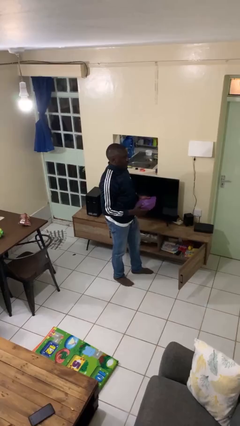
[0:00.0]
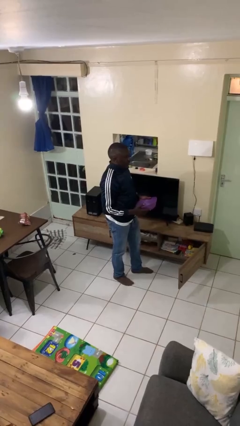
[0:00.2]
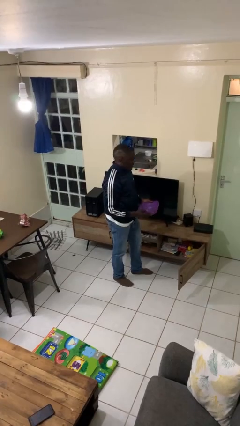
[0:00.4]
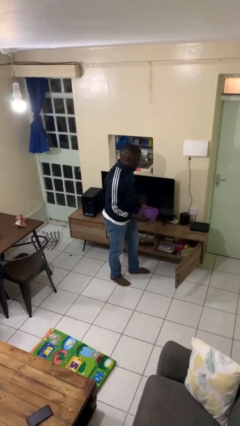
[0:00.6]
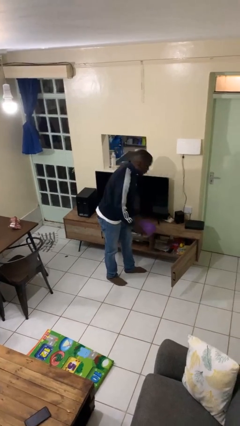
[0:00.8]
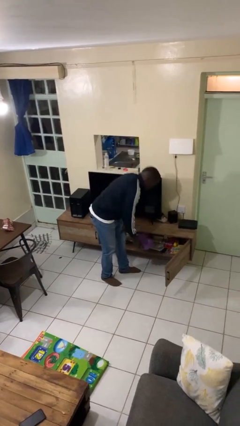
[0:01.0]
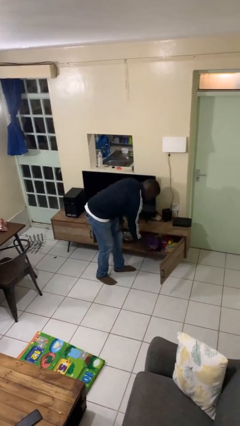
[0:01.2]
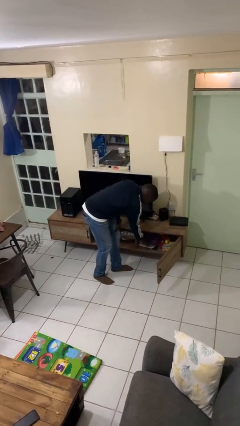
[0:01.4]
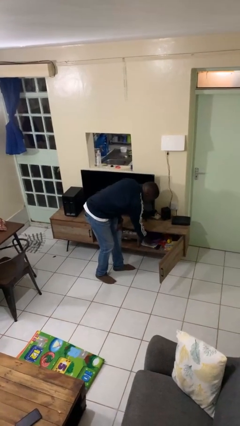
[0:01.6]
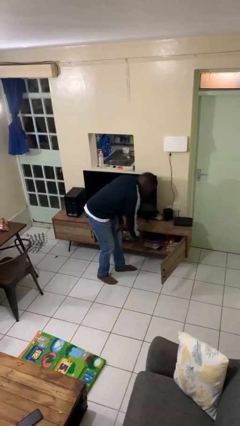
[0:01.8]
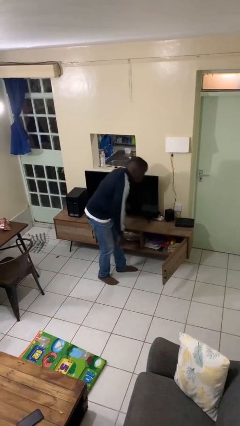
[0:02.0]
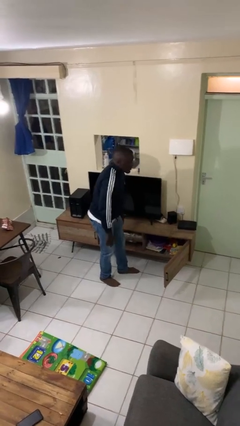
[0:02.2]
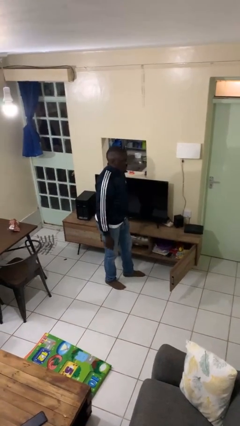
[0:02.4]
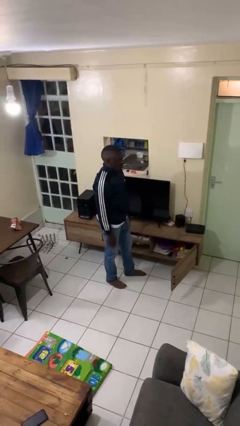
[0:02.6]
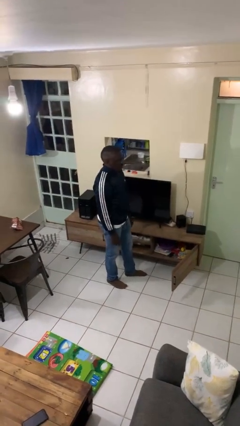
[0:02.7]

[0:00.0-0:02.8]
person puts down object into cabinet

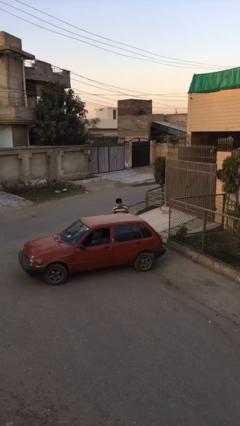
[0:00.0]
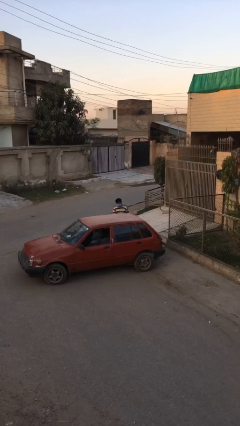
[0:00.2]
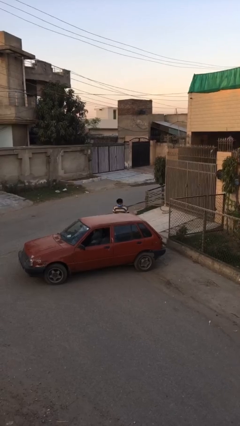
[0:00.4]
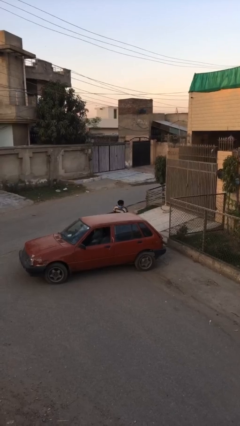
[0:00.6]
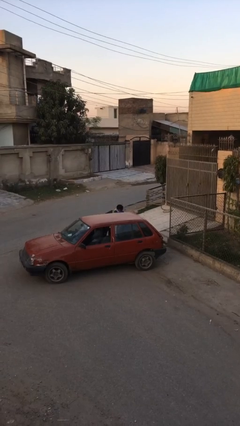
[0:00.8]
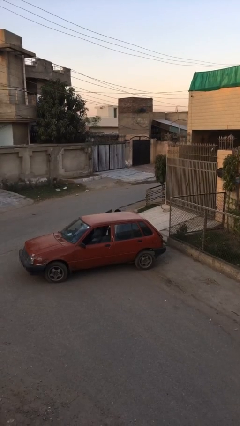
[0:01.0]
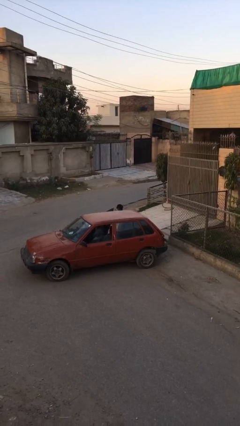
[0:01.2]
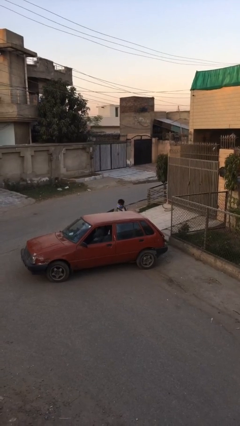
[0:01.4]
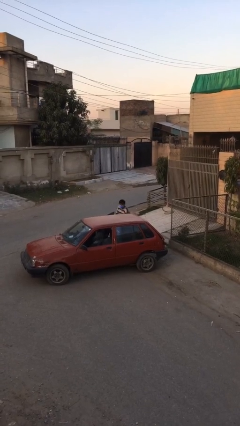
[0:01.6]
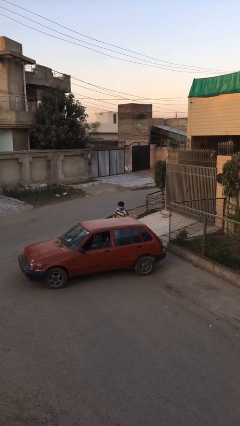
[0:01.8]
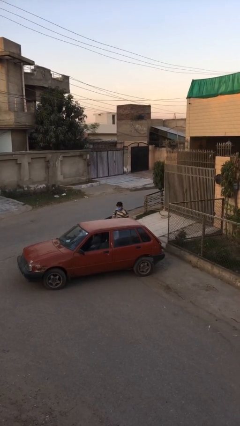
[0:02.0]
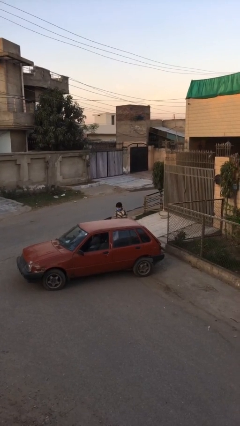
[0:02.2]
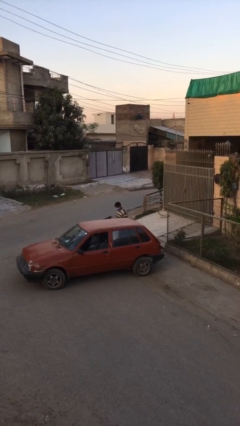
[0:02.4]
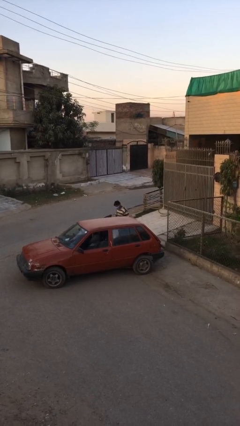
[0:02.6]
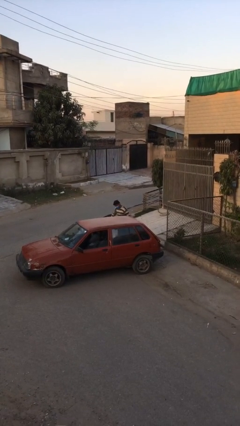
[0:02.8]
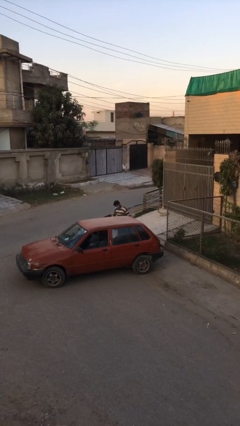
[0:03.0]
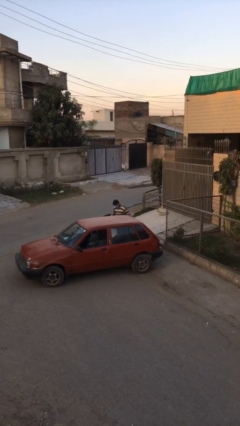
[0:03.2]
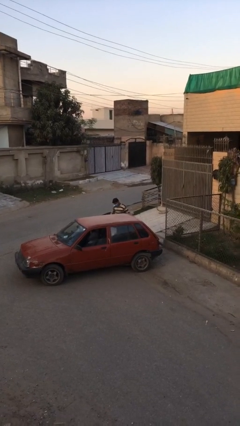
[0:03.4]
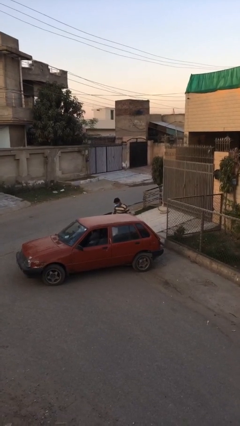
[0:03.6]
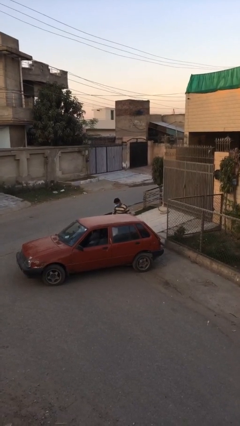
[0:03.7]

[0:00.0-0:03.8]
person unloads car

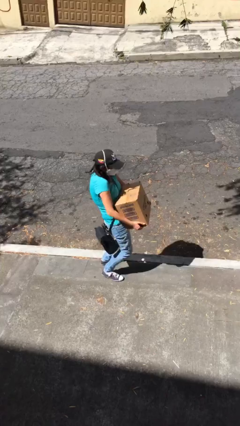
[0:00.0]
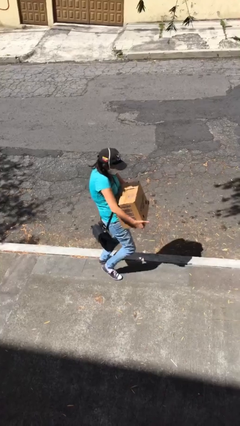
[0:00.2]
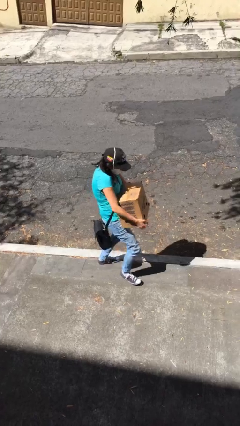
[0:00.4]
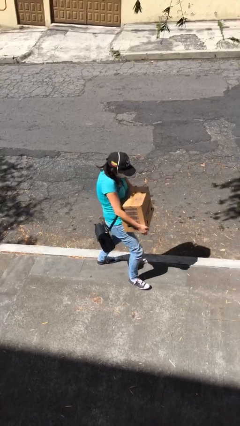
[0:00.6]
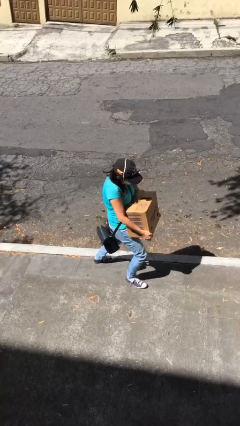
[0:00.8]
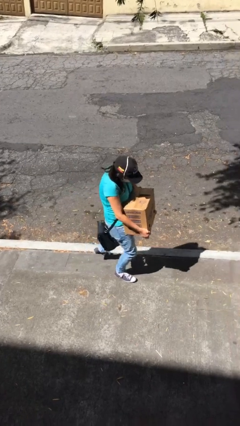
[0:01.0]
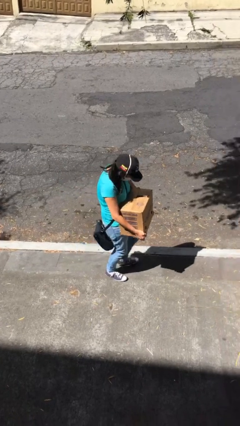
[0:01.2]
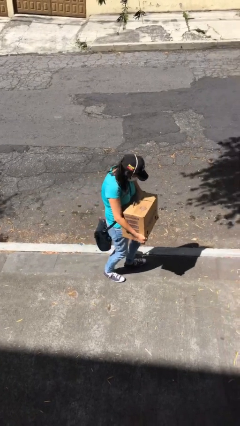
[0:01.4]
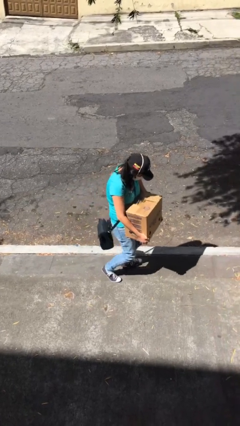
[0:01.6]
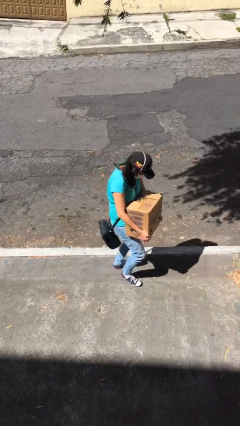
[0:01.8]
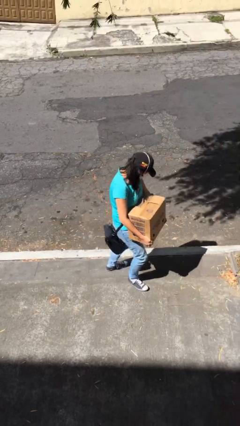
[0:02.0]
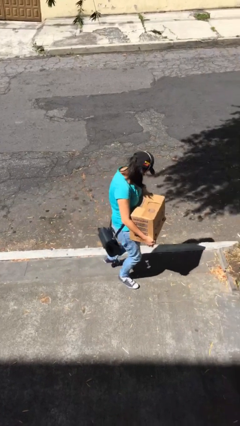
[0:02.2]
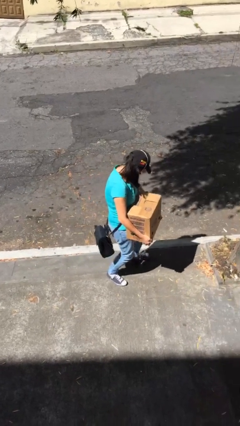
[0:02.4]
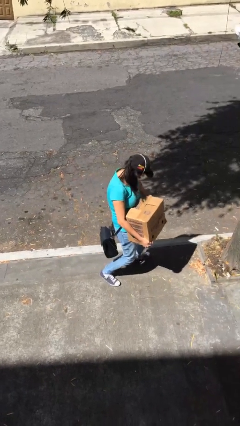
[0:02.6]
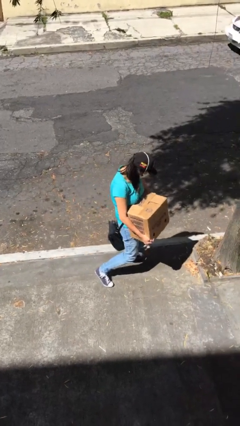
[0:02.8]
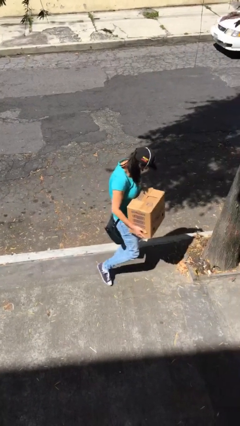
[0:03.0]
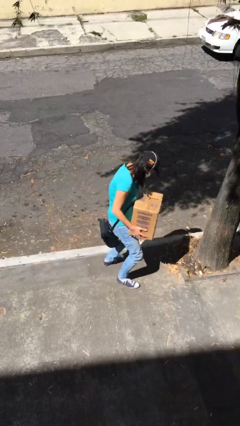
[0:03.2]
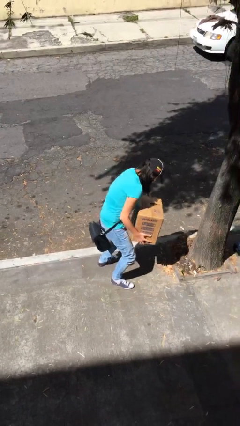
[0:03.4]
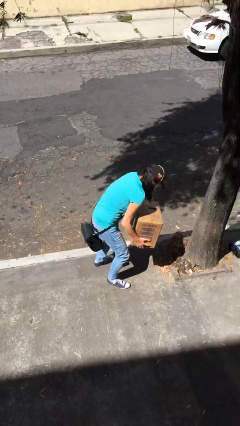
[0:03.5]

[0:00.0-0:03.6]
person carries heavy object

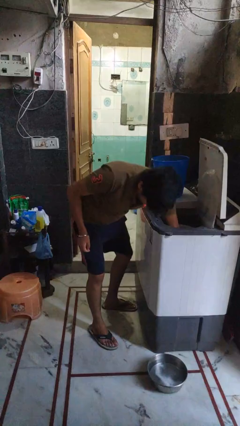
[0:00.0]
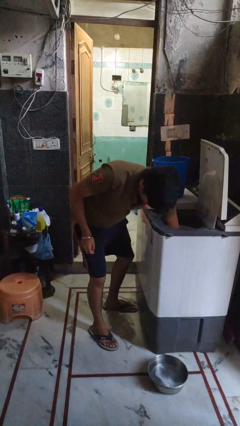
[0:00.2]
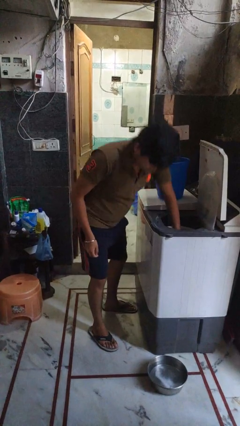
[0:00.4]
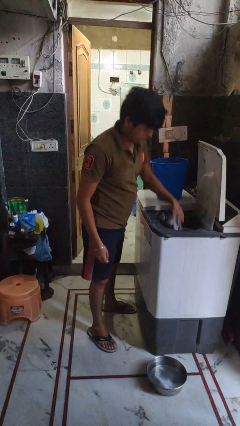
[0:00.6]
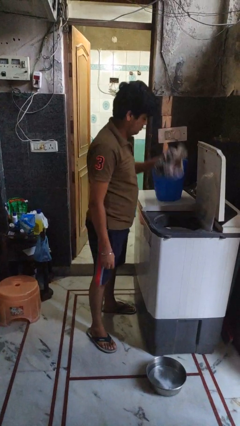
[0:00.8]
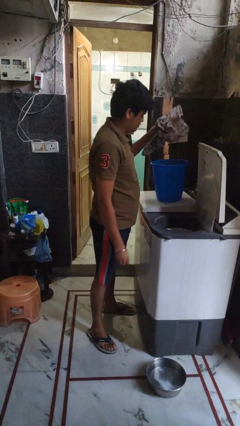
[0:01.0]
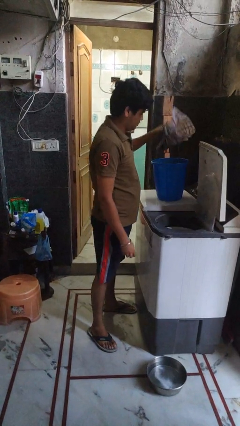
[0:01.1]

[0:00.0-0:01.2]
person unloads dryer

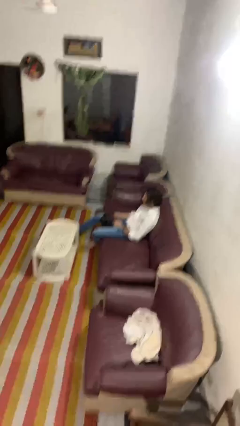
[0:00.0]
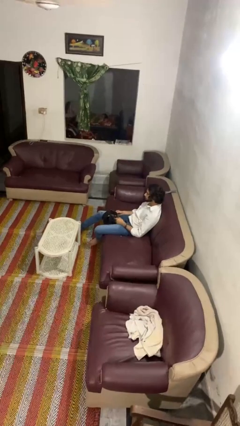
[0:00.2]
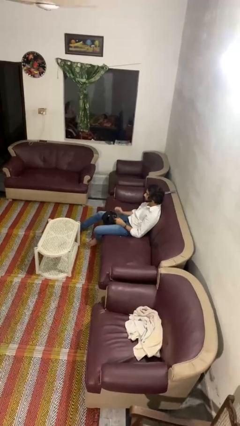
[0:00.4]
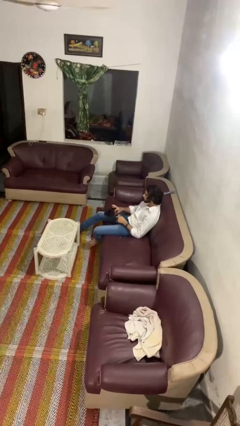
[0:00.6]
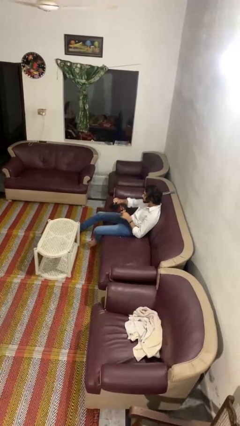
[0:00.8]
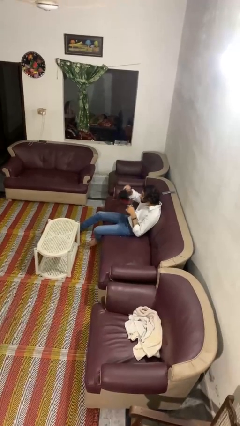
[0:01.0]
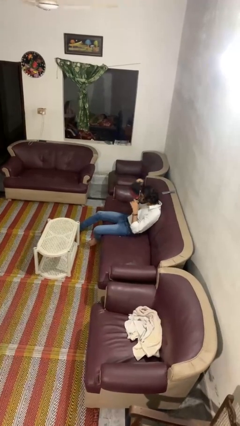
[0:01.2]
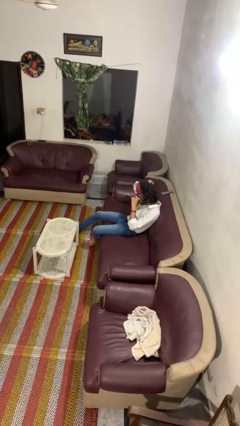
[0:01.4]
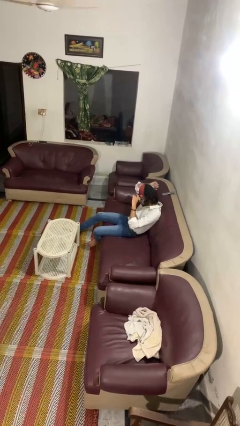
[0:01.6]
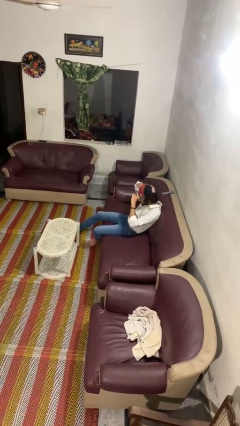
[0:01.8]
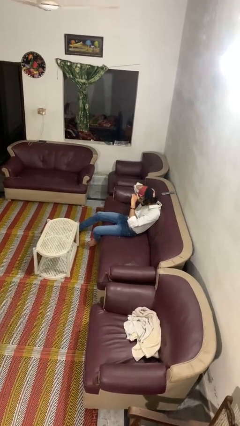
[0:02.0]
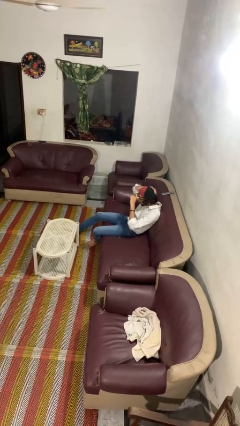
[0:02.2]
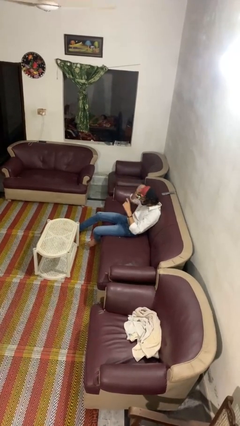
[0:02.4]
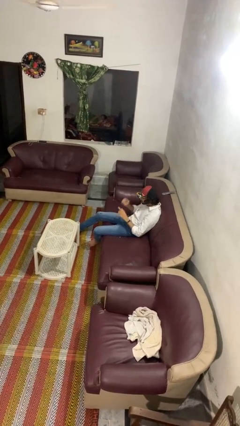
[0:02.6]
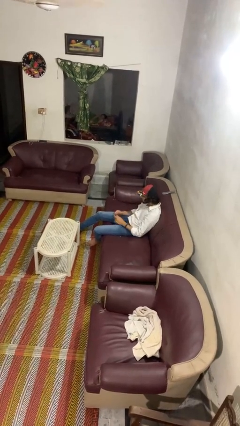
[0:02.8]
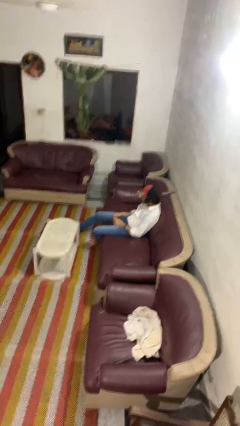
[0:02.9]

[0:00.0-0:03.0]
person puts on hat

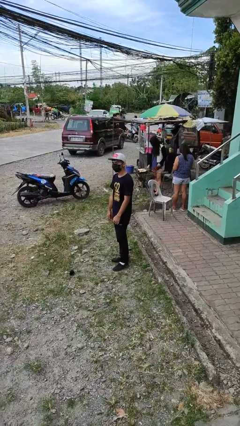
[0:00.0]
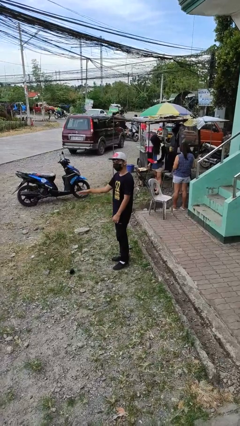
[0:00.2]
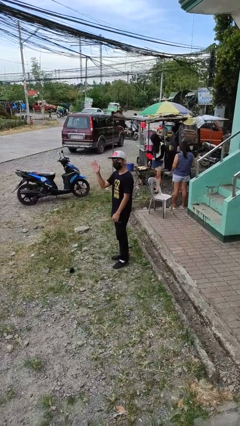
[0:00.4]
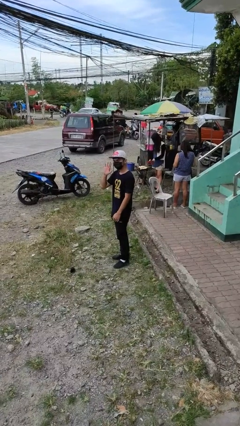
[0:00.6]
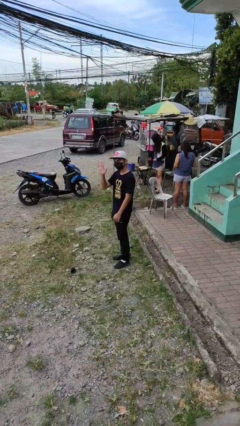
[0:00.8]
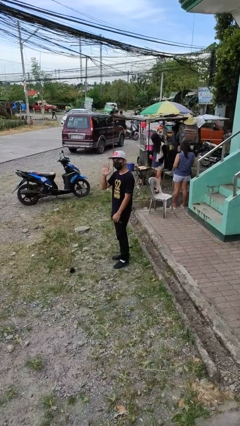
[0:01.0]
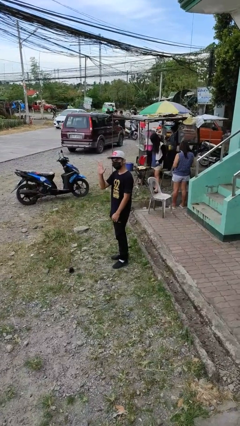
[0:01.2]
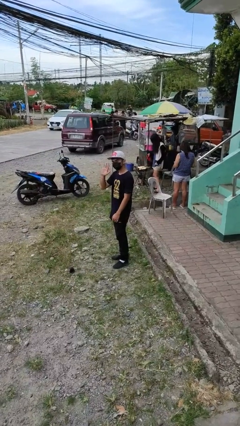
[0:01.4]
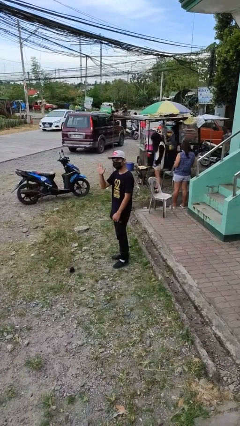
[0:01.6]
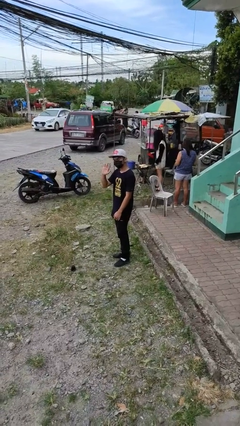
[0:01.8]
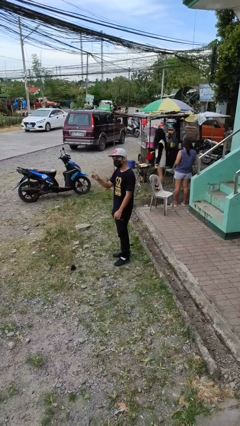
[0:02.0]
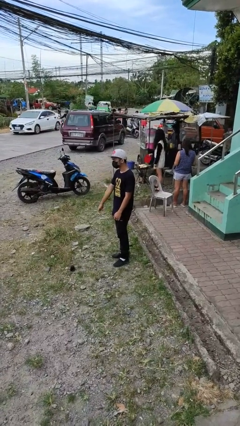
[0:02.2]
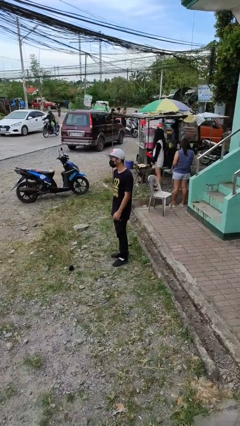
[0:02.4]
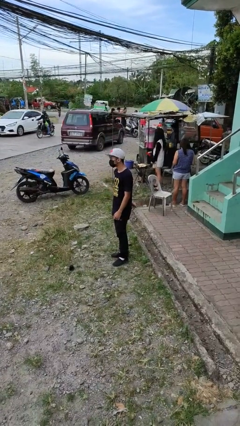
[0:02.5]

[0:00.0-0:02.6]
person waves at person

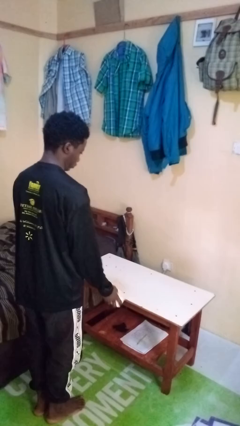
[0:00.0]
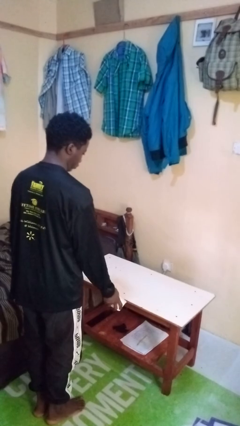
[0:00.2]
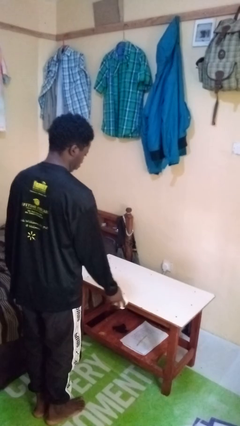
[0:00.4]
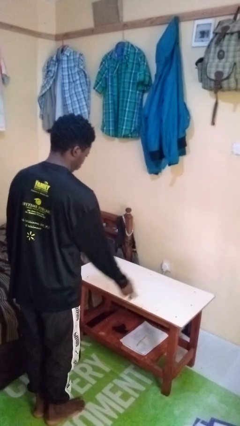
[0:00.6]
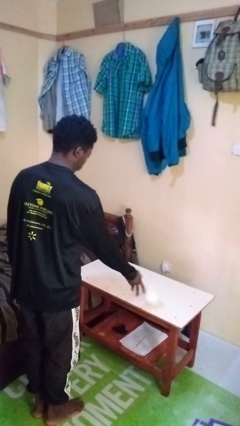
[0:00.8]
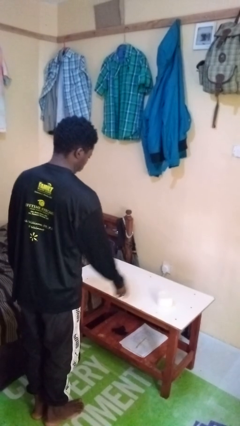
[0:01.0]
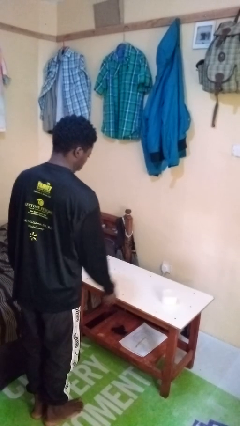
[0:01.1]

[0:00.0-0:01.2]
person throws object on table
